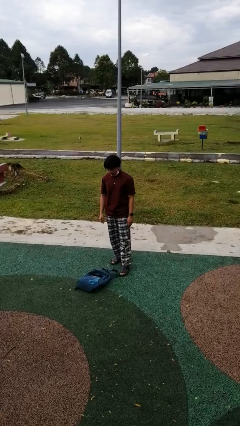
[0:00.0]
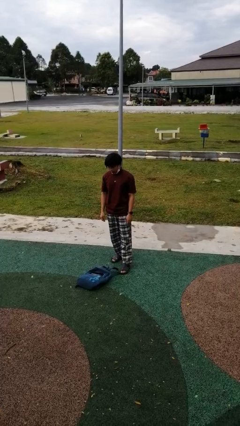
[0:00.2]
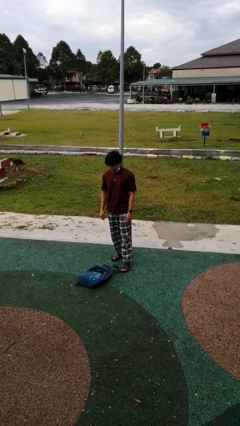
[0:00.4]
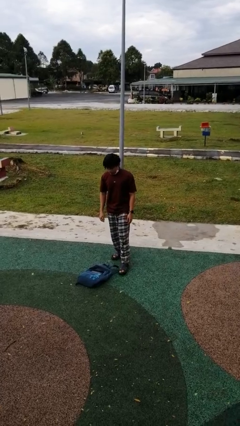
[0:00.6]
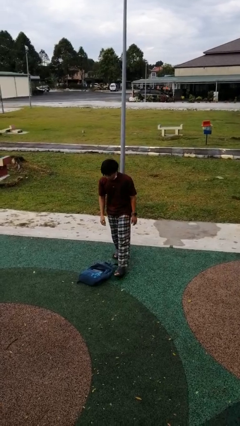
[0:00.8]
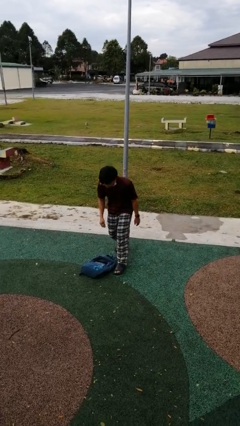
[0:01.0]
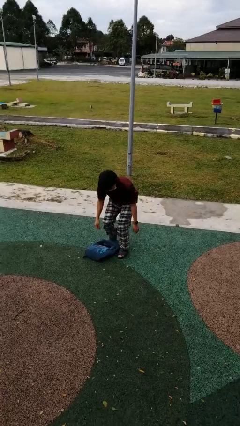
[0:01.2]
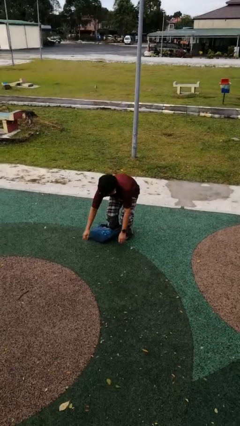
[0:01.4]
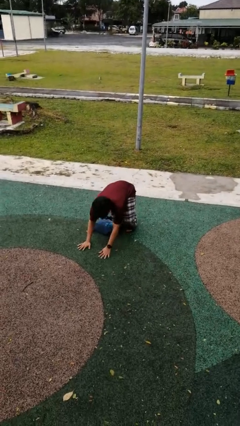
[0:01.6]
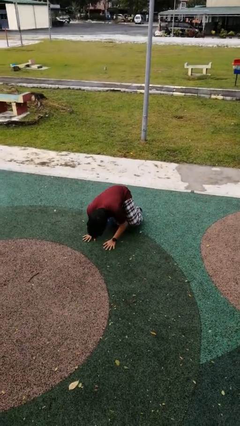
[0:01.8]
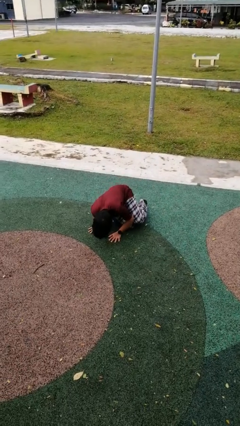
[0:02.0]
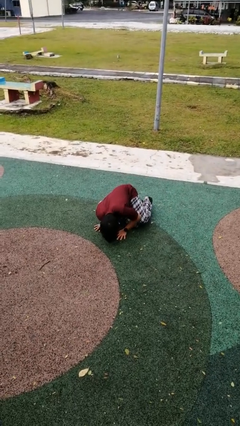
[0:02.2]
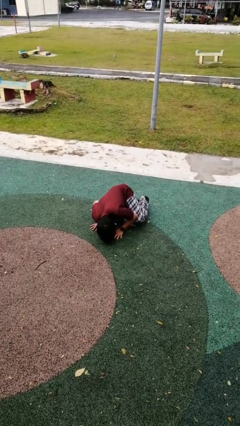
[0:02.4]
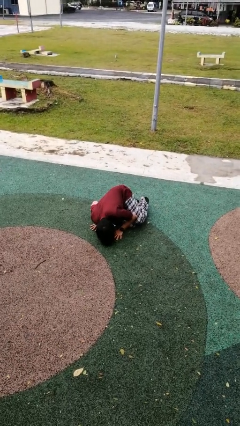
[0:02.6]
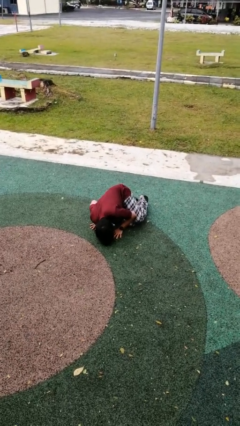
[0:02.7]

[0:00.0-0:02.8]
person trips on object on floor

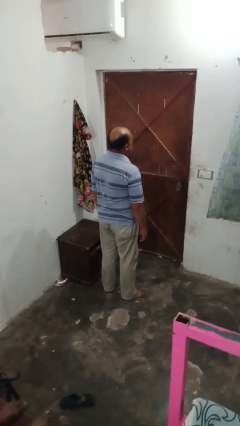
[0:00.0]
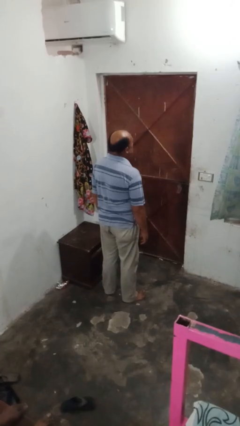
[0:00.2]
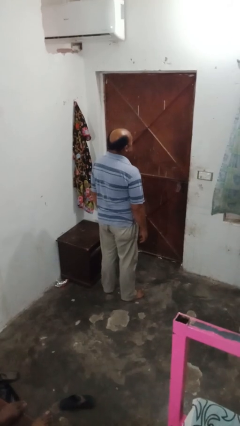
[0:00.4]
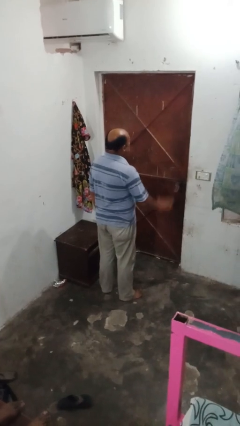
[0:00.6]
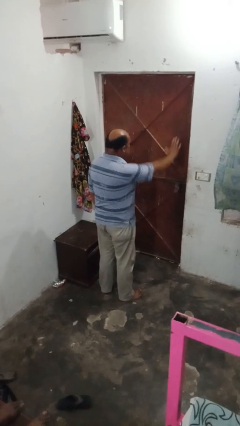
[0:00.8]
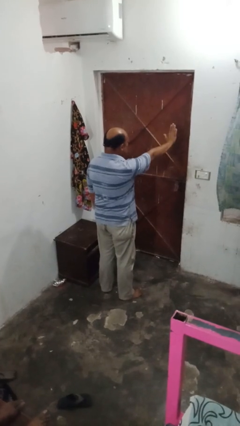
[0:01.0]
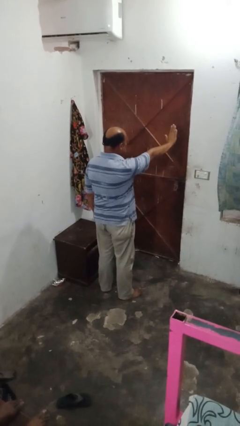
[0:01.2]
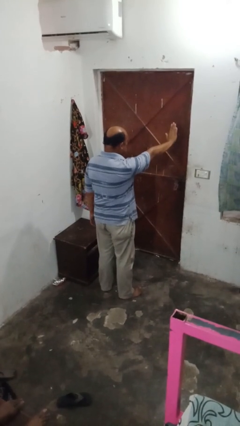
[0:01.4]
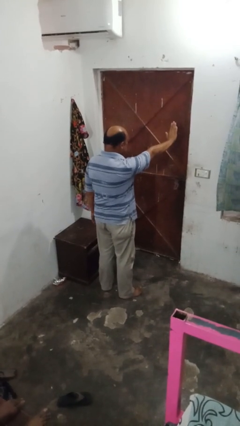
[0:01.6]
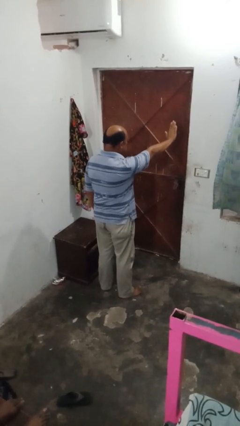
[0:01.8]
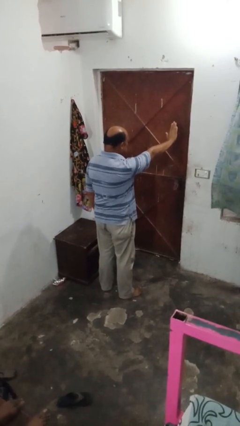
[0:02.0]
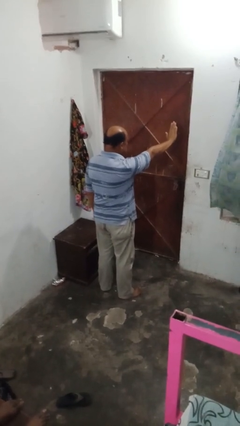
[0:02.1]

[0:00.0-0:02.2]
person gestures stop

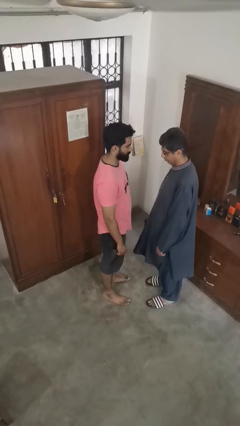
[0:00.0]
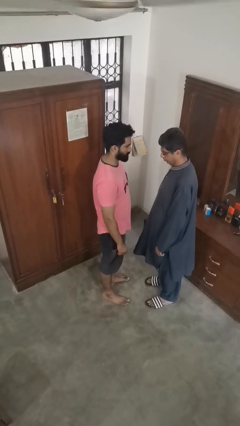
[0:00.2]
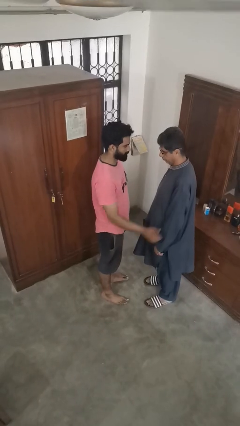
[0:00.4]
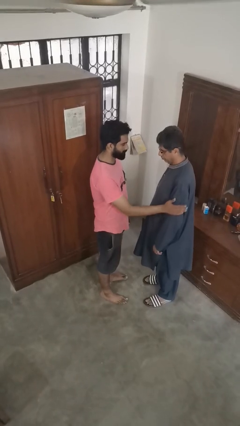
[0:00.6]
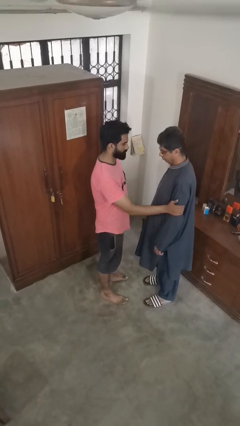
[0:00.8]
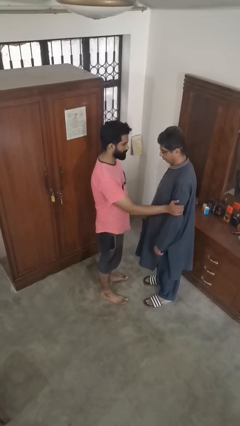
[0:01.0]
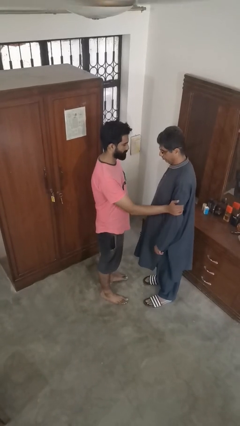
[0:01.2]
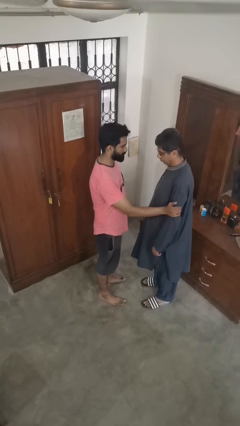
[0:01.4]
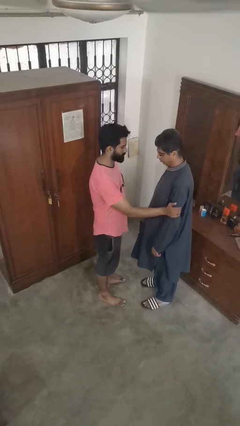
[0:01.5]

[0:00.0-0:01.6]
person grabs person by bicep

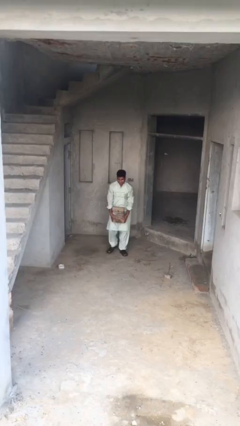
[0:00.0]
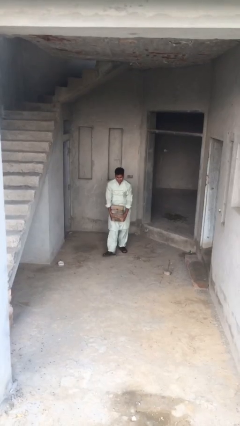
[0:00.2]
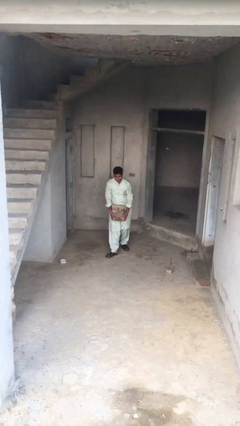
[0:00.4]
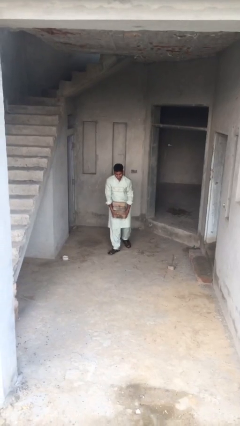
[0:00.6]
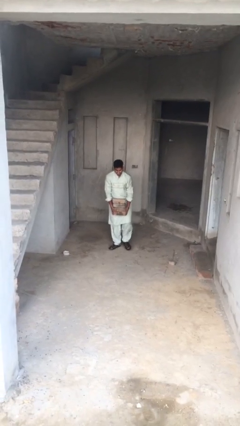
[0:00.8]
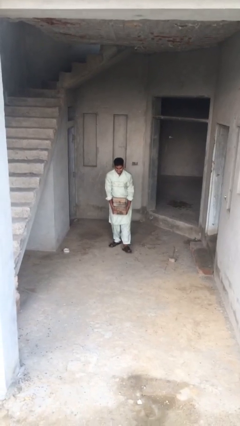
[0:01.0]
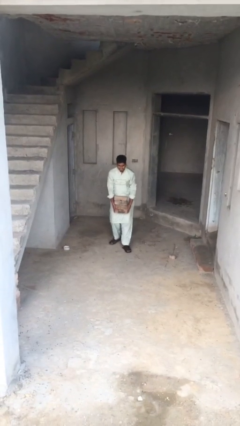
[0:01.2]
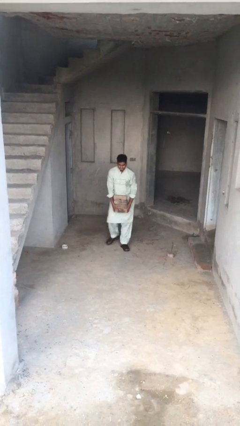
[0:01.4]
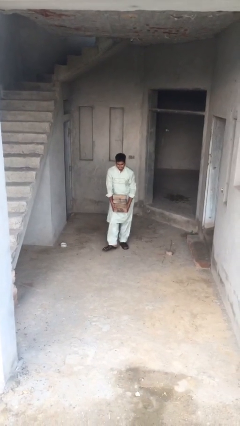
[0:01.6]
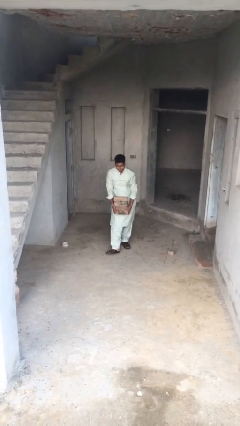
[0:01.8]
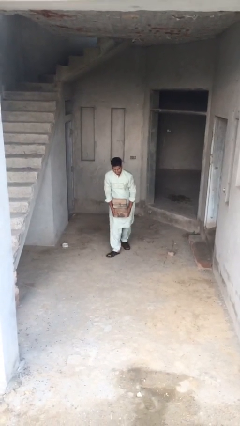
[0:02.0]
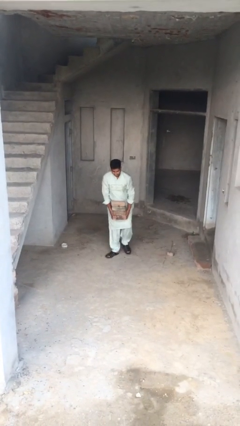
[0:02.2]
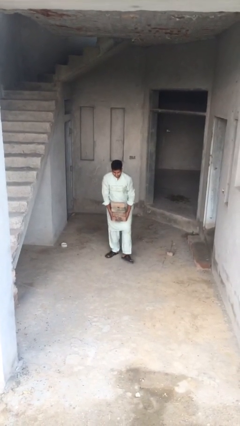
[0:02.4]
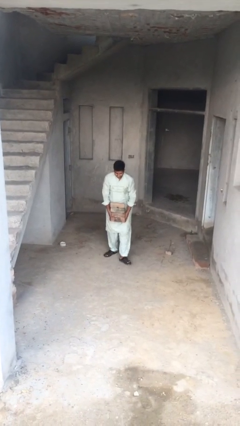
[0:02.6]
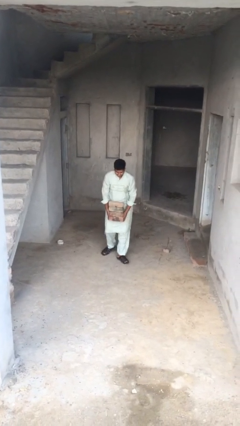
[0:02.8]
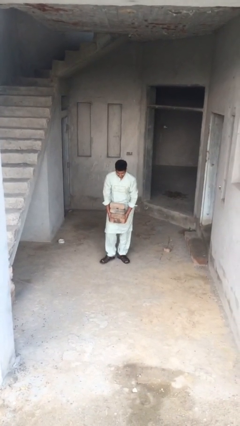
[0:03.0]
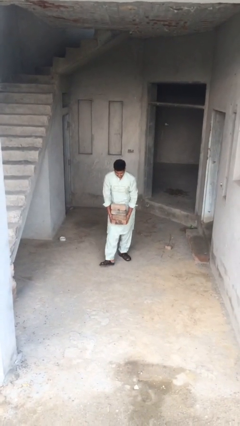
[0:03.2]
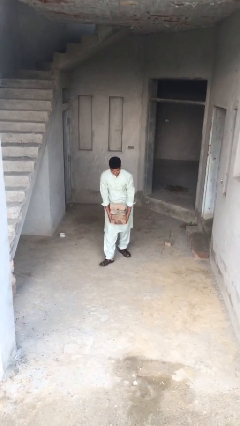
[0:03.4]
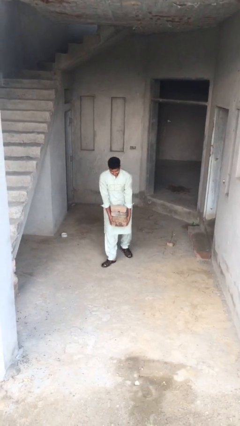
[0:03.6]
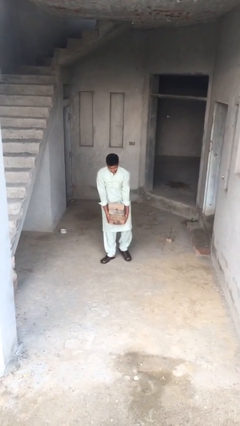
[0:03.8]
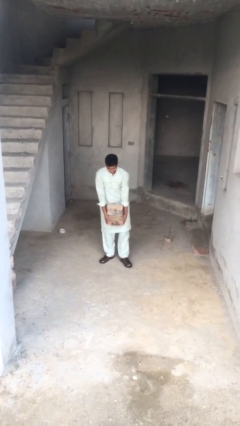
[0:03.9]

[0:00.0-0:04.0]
person carries heavy object

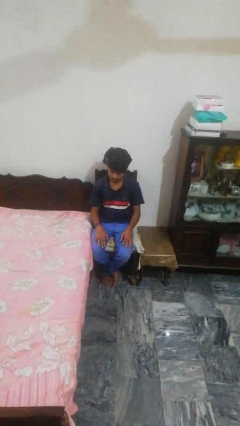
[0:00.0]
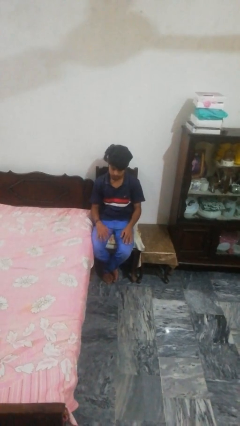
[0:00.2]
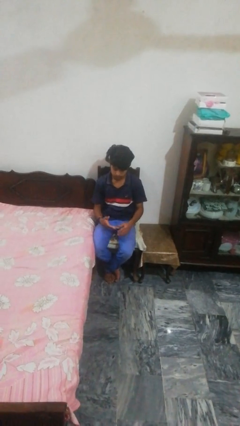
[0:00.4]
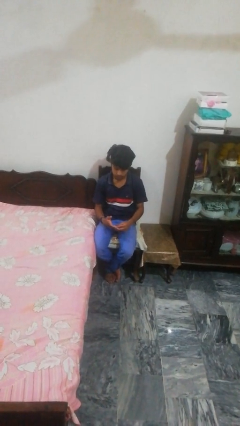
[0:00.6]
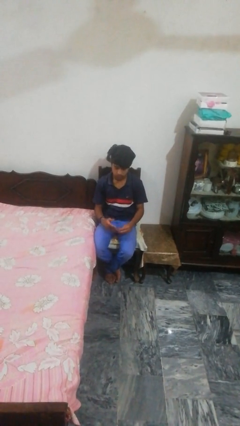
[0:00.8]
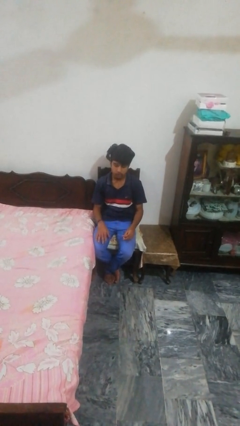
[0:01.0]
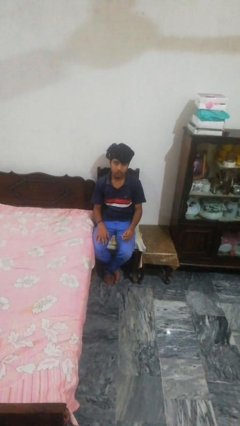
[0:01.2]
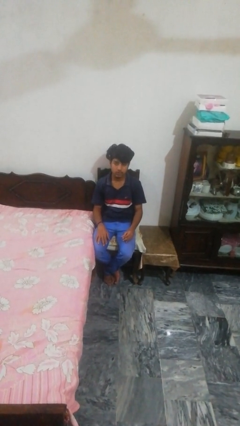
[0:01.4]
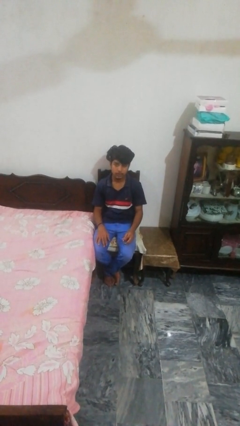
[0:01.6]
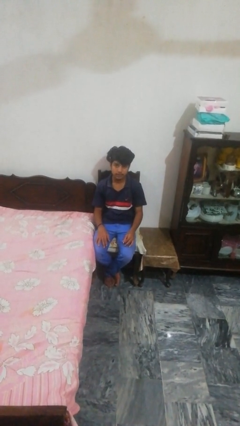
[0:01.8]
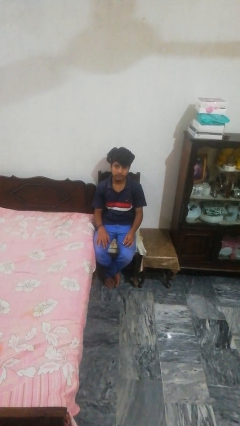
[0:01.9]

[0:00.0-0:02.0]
person takes off ring

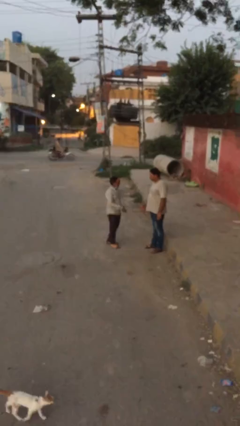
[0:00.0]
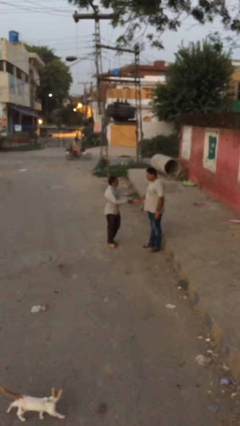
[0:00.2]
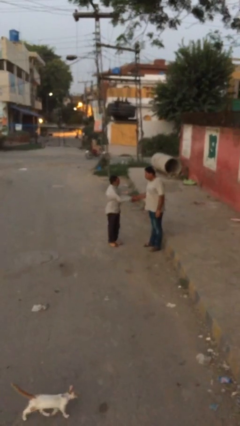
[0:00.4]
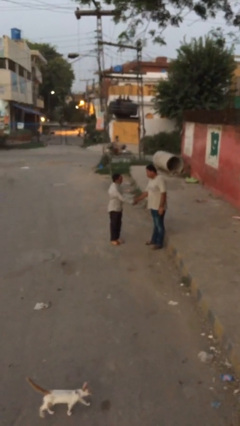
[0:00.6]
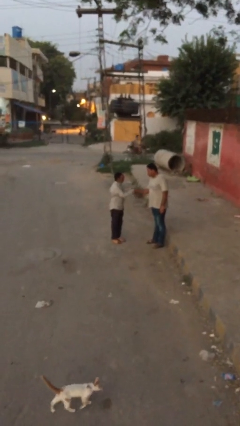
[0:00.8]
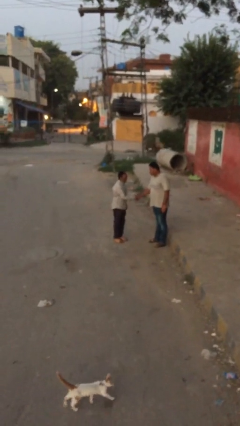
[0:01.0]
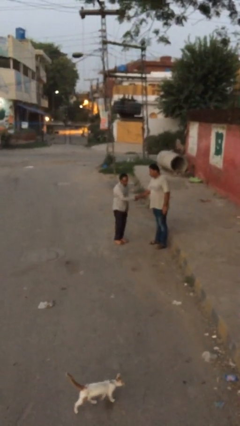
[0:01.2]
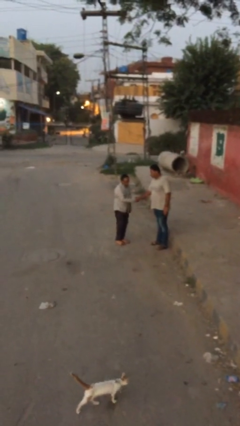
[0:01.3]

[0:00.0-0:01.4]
person shakes hand

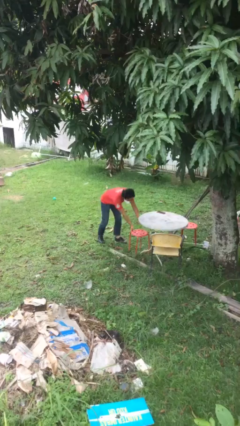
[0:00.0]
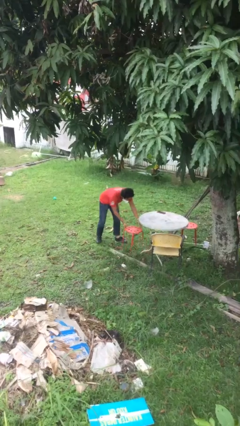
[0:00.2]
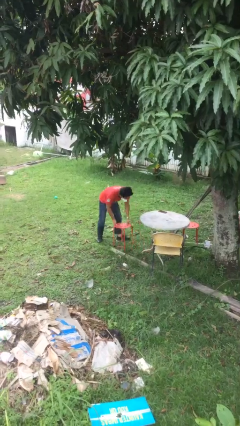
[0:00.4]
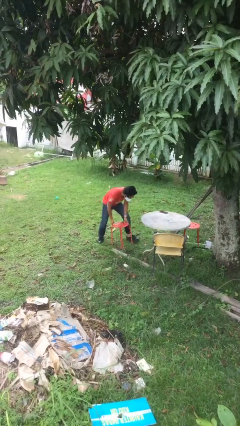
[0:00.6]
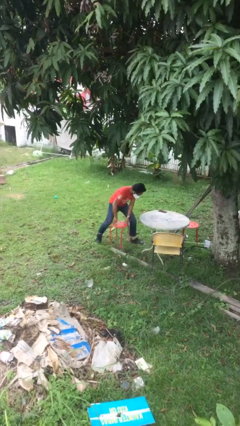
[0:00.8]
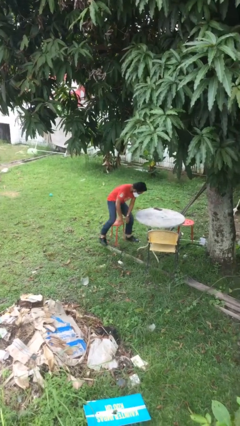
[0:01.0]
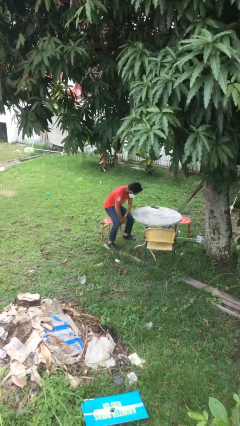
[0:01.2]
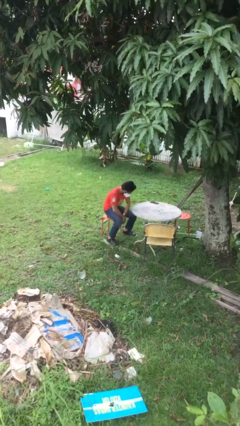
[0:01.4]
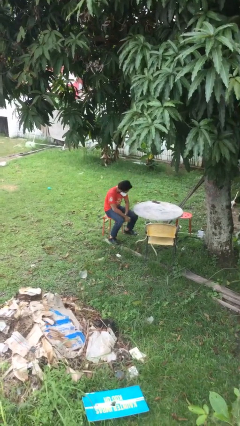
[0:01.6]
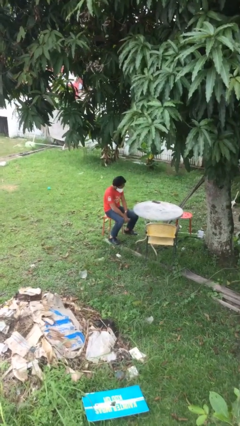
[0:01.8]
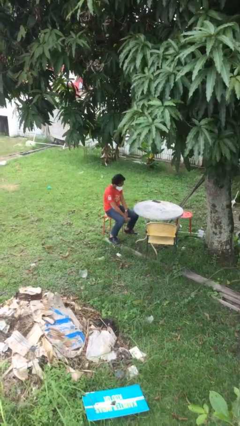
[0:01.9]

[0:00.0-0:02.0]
person sits down

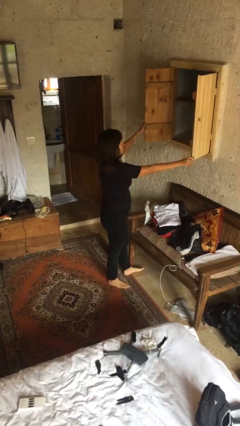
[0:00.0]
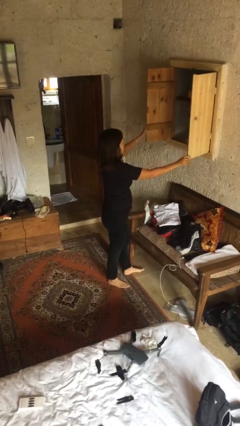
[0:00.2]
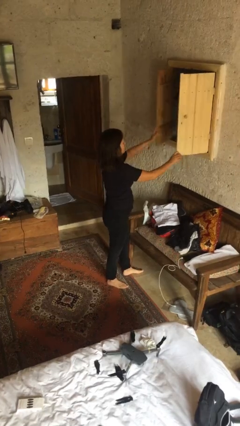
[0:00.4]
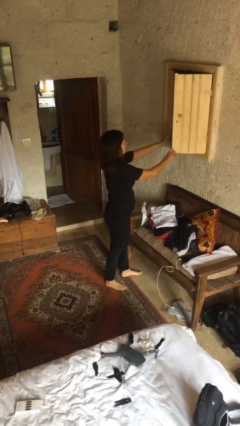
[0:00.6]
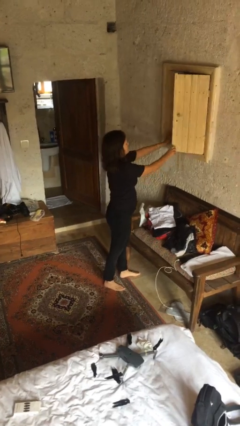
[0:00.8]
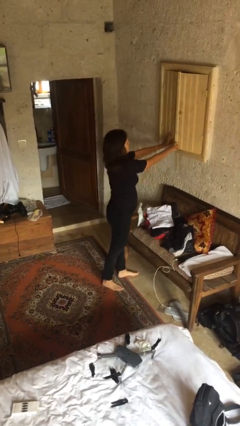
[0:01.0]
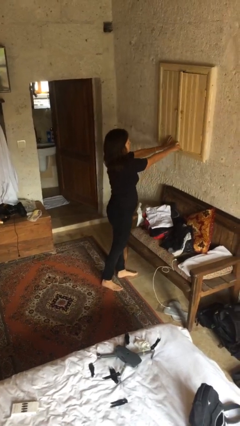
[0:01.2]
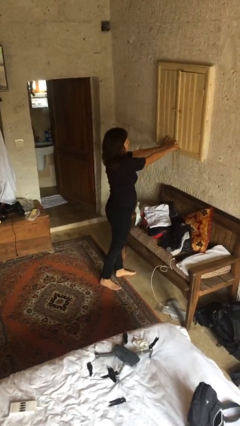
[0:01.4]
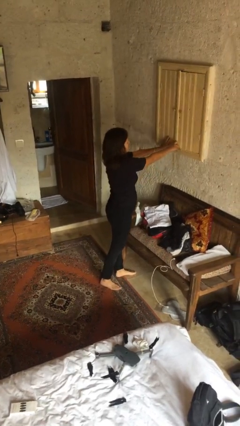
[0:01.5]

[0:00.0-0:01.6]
person closes dresser drawer
